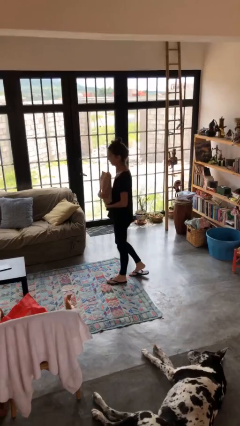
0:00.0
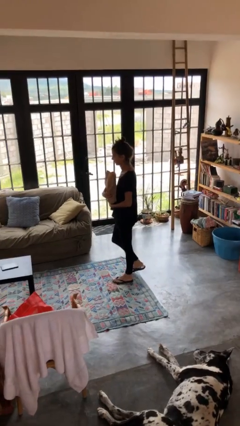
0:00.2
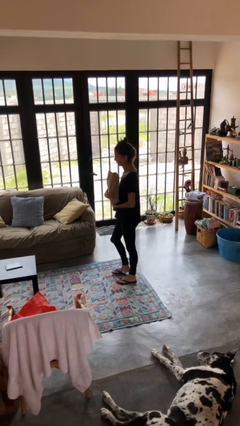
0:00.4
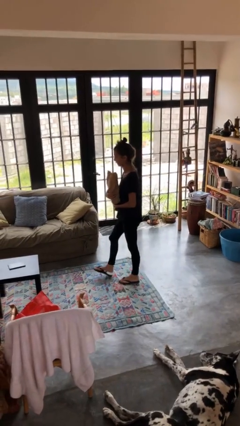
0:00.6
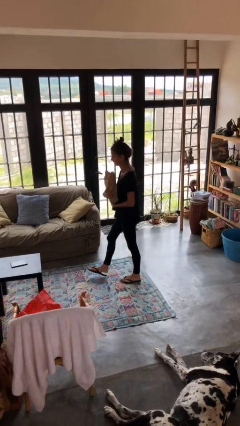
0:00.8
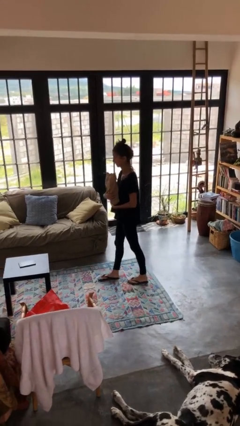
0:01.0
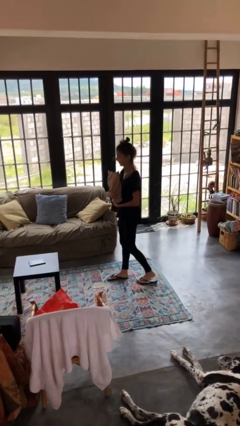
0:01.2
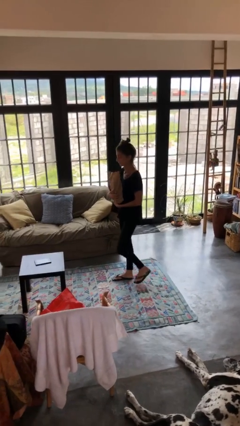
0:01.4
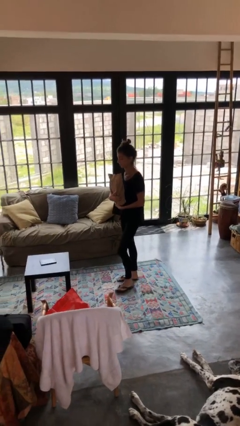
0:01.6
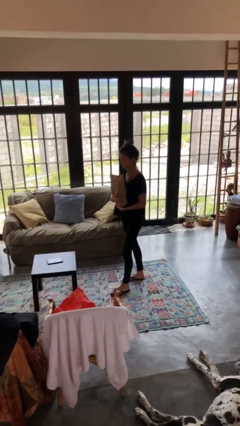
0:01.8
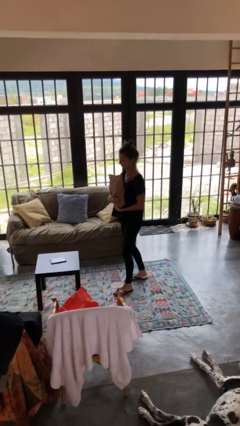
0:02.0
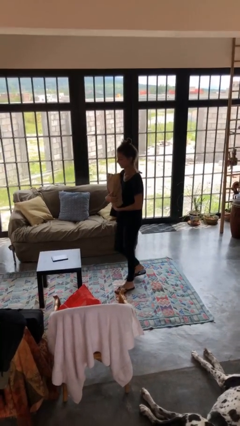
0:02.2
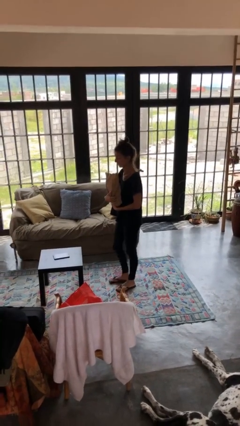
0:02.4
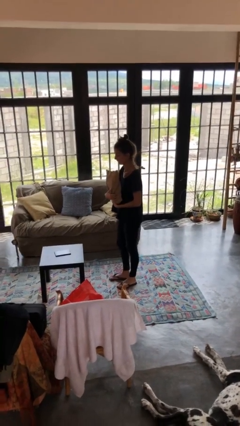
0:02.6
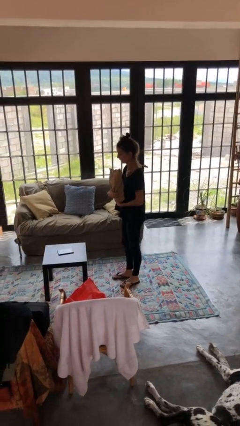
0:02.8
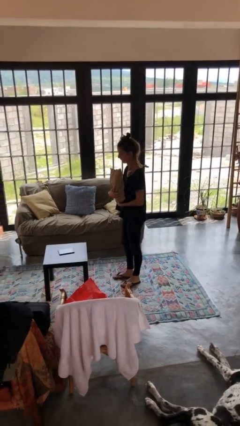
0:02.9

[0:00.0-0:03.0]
person carries groceries

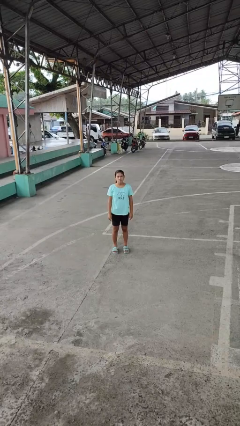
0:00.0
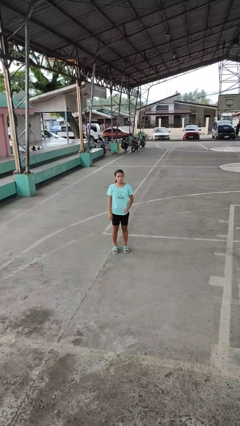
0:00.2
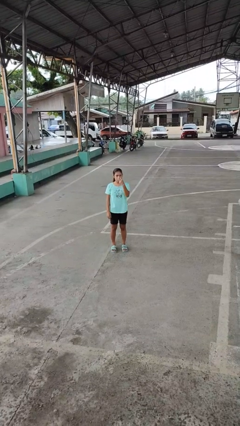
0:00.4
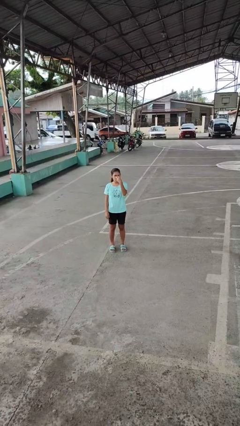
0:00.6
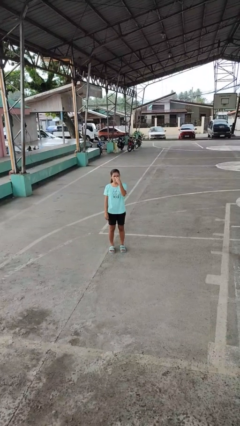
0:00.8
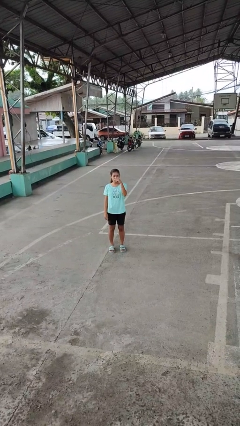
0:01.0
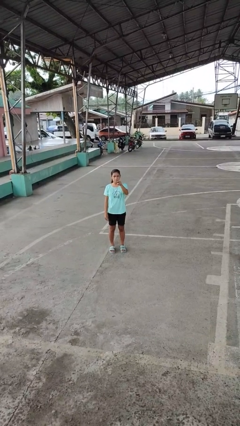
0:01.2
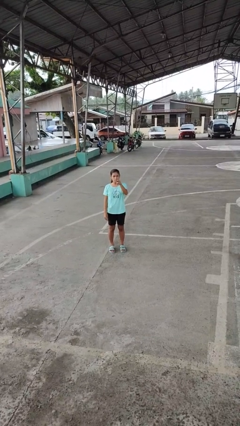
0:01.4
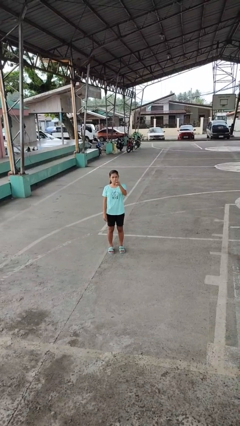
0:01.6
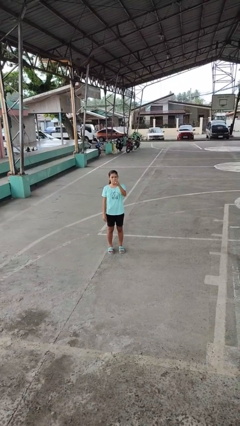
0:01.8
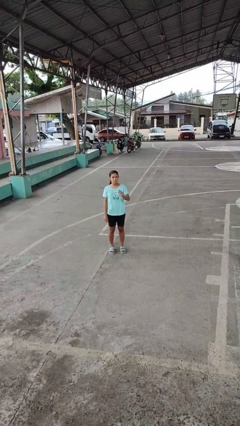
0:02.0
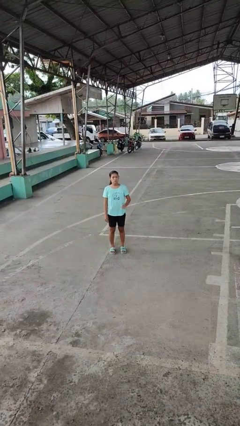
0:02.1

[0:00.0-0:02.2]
person gestures watch closely

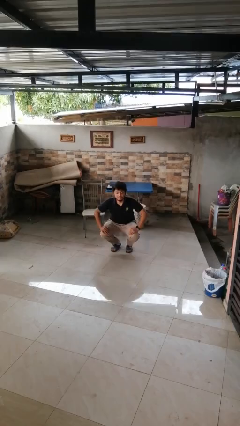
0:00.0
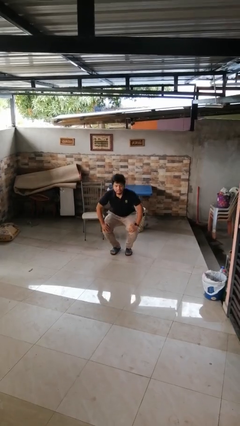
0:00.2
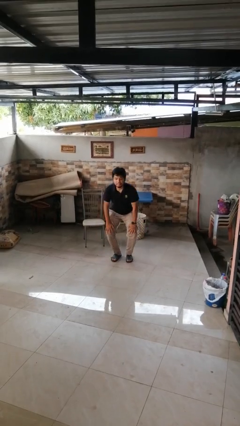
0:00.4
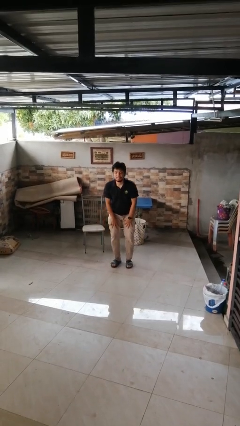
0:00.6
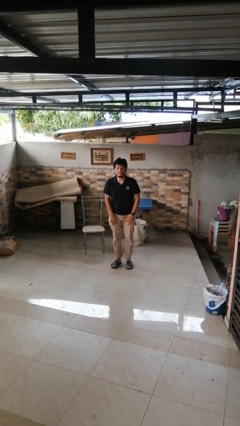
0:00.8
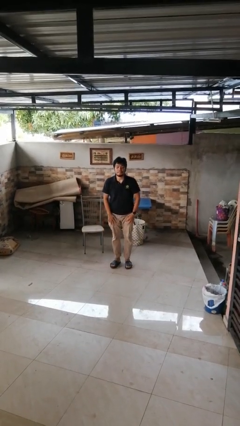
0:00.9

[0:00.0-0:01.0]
person stands up

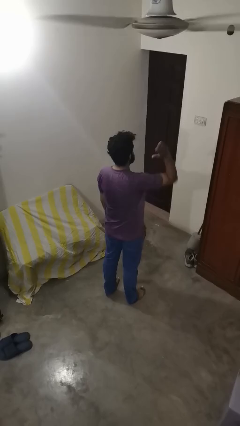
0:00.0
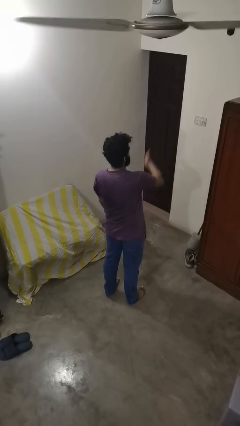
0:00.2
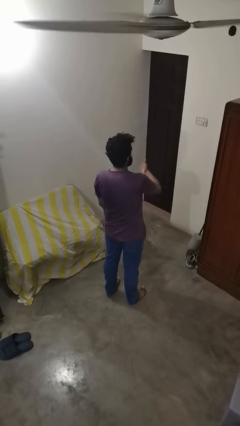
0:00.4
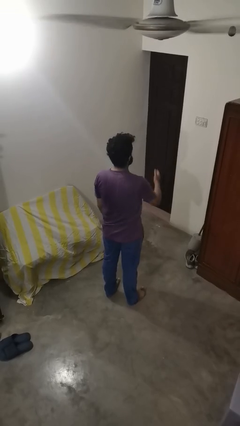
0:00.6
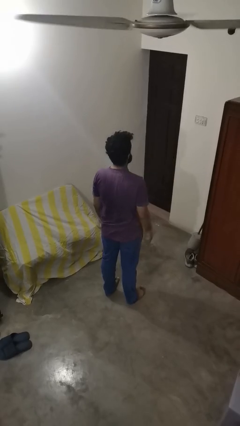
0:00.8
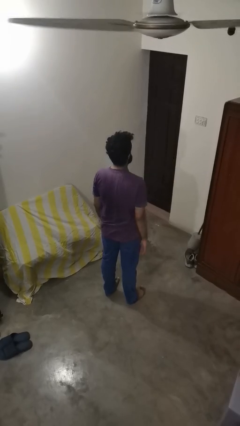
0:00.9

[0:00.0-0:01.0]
person karate chop

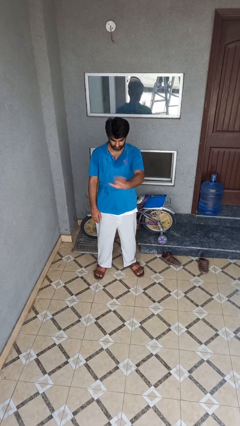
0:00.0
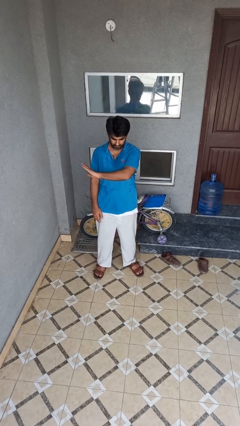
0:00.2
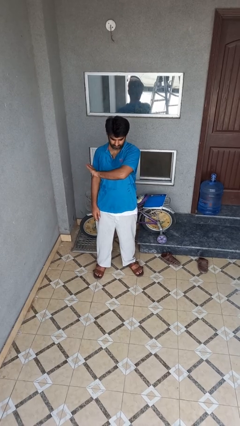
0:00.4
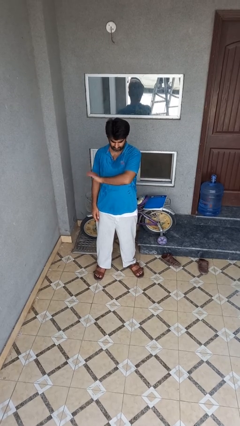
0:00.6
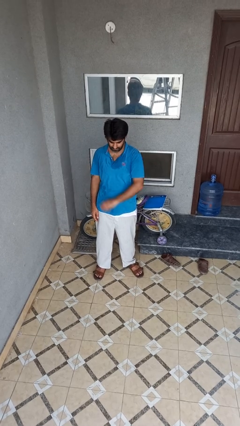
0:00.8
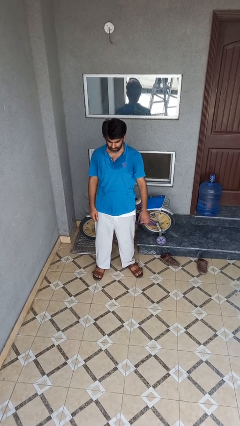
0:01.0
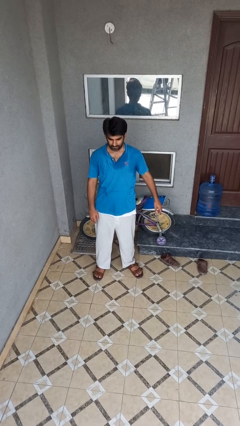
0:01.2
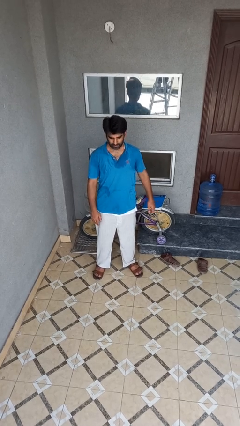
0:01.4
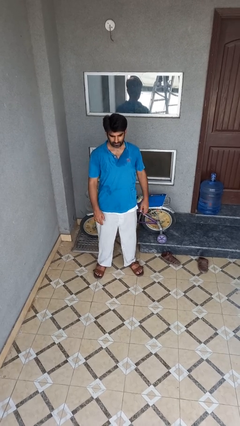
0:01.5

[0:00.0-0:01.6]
person gestures swipe right

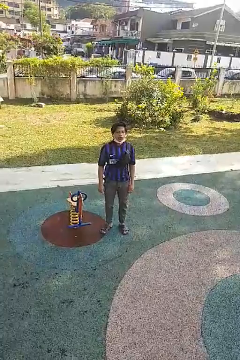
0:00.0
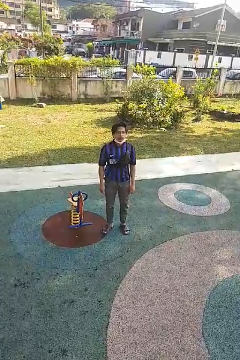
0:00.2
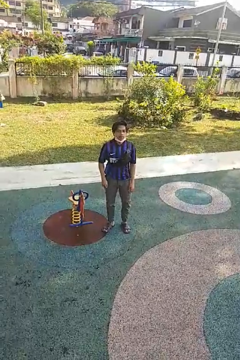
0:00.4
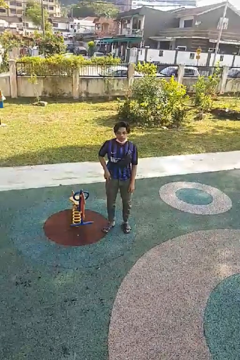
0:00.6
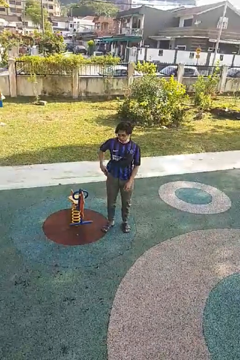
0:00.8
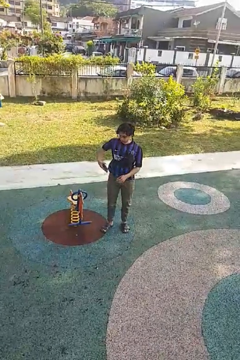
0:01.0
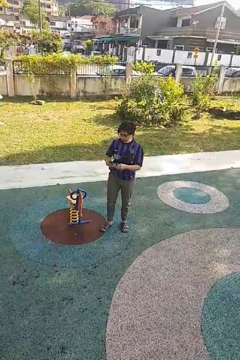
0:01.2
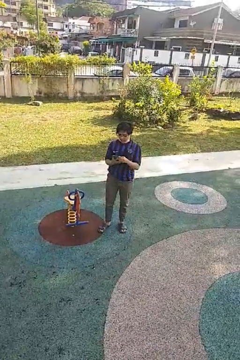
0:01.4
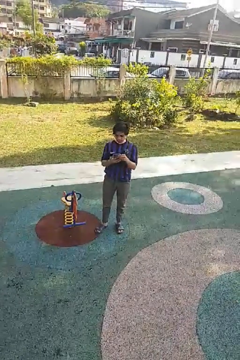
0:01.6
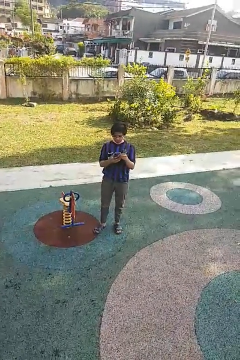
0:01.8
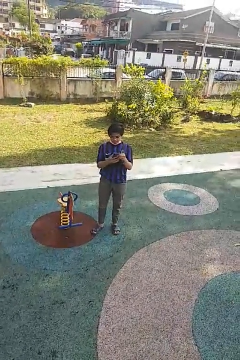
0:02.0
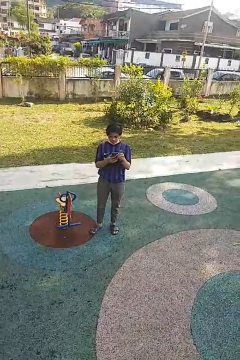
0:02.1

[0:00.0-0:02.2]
person takes phone from pocket

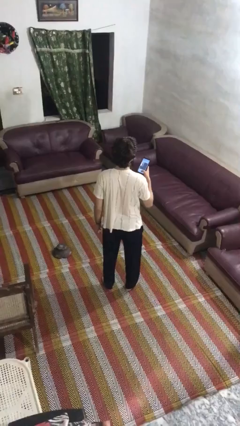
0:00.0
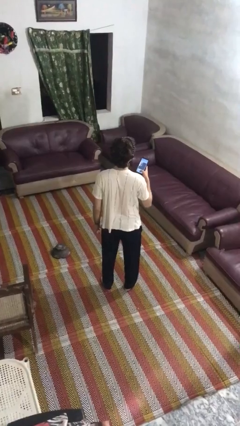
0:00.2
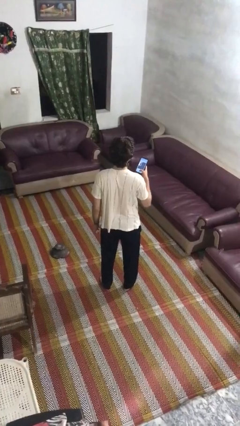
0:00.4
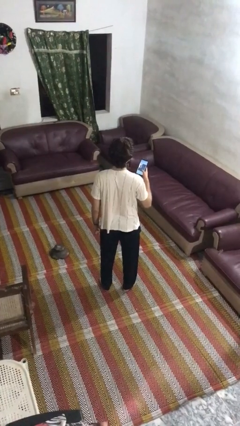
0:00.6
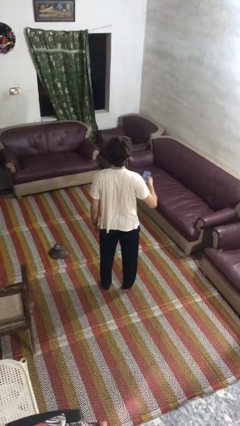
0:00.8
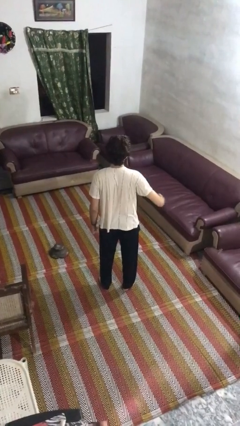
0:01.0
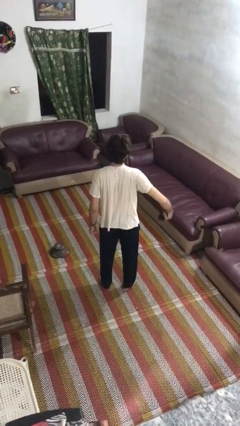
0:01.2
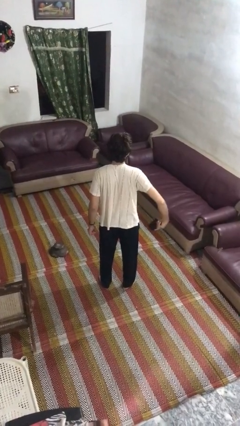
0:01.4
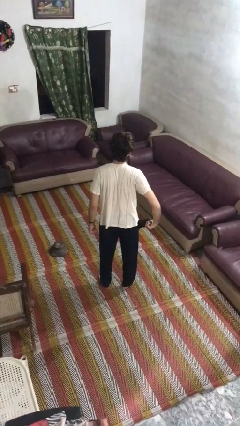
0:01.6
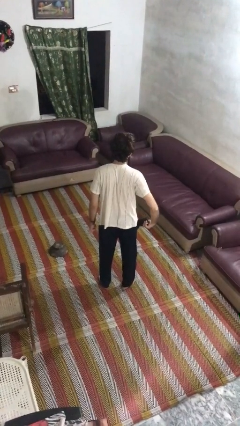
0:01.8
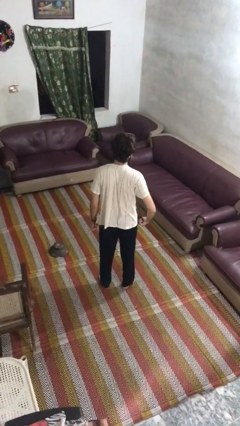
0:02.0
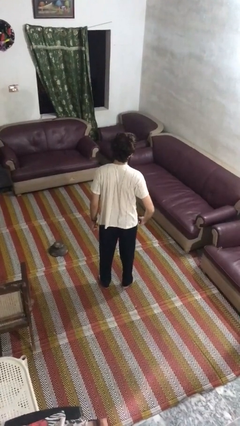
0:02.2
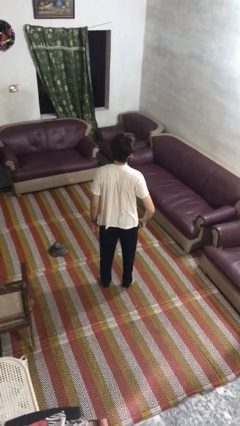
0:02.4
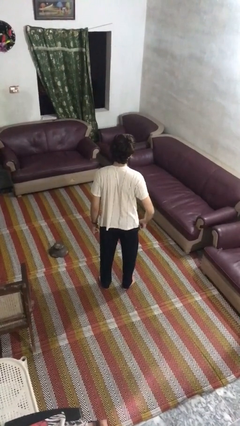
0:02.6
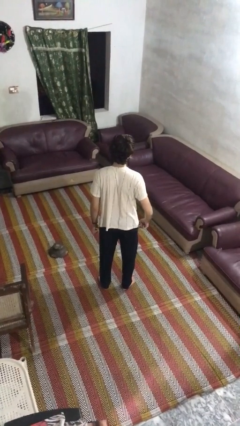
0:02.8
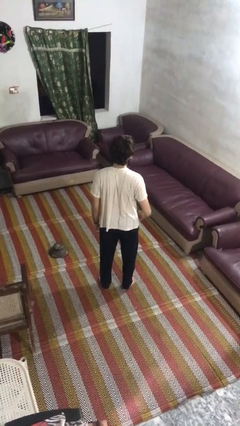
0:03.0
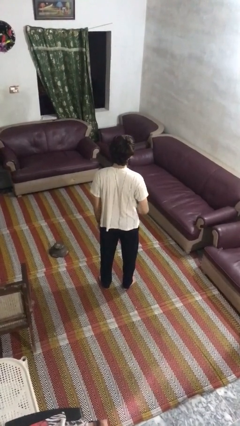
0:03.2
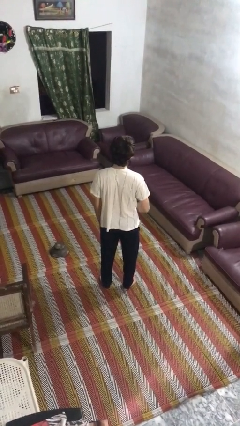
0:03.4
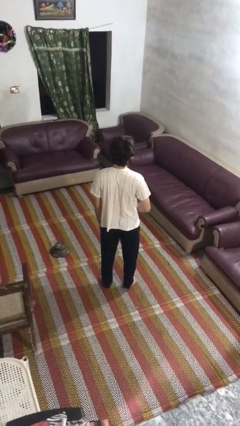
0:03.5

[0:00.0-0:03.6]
person puts phone into pocket

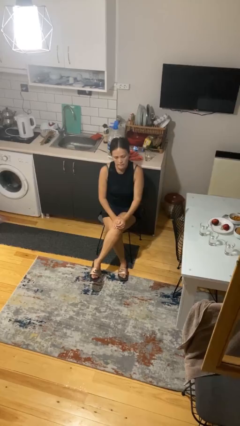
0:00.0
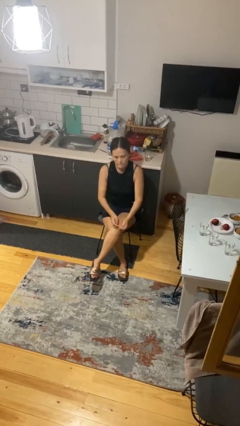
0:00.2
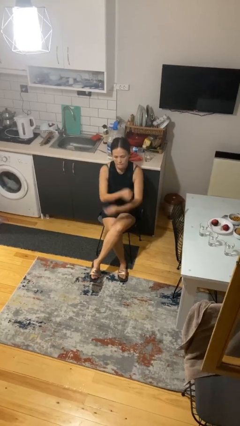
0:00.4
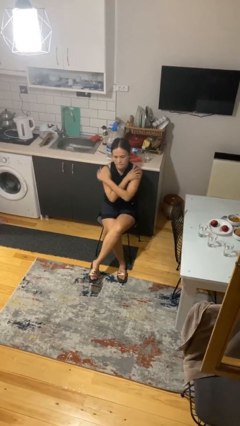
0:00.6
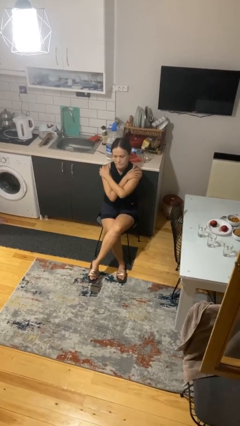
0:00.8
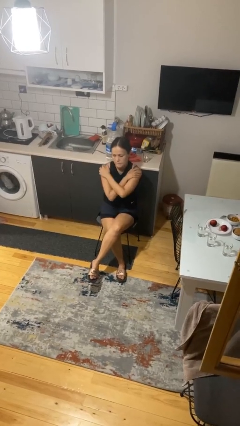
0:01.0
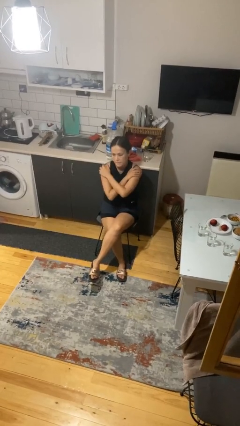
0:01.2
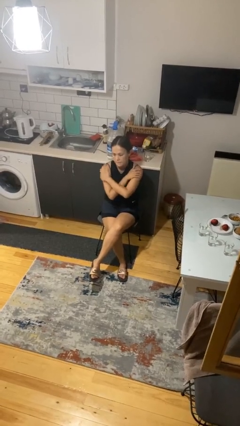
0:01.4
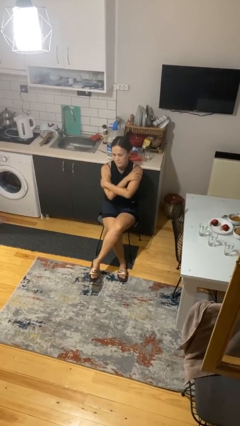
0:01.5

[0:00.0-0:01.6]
person crosses arms

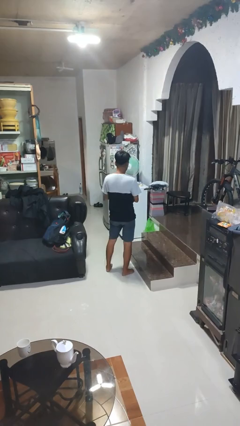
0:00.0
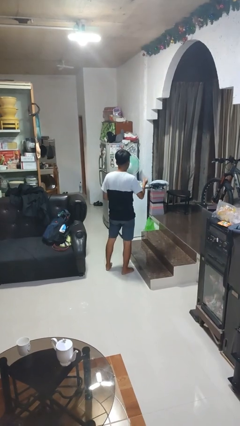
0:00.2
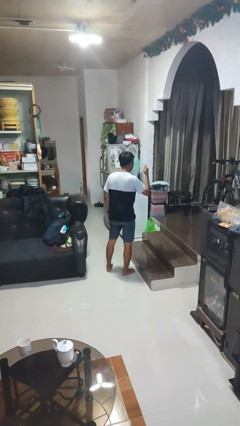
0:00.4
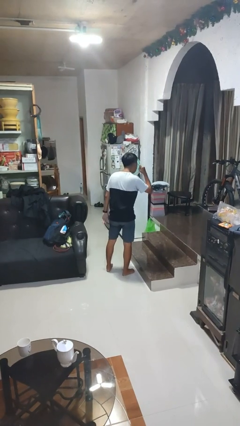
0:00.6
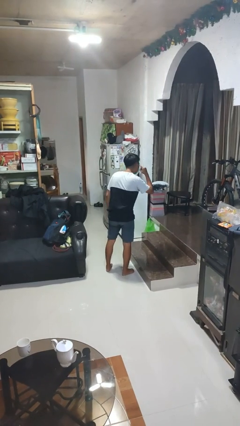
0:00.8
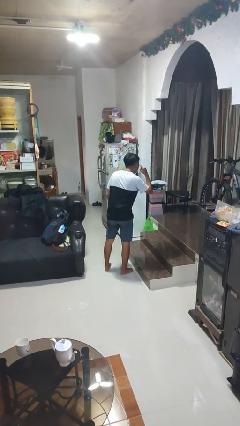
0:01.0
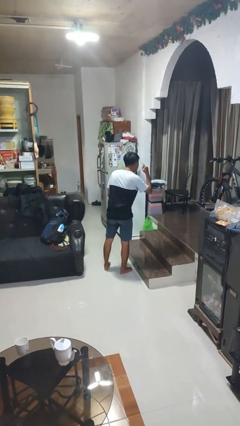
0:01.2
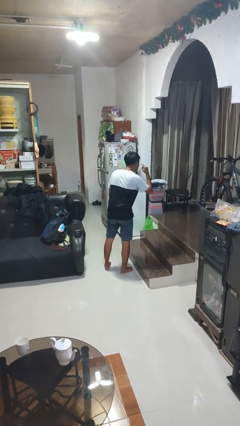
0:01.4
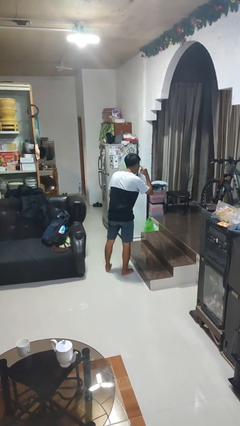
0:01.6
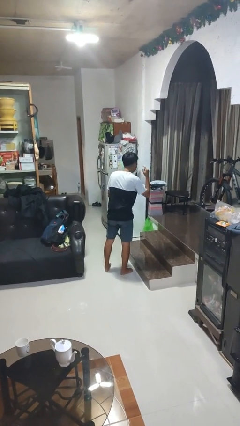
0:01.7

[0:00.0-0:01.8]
person gestures listen closely
